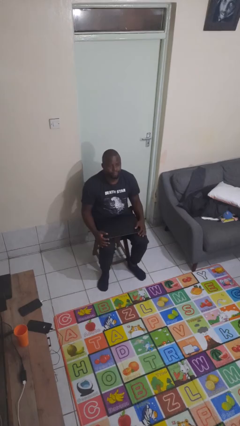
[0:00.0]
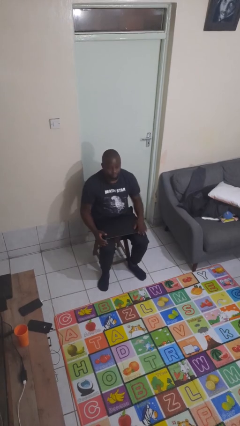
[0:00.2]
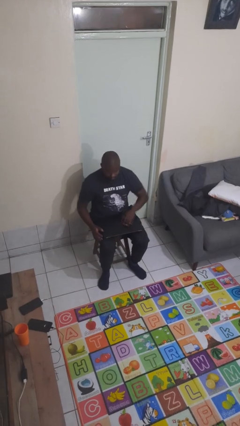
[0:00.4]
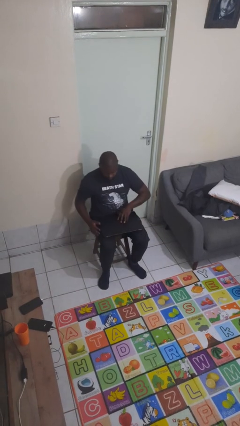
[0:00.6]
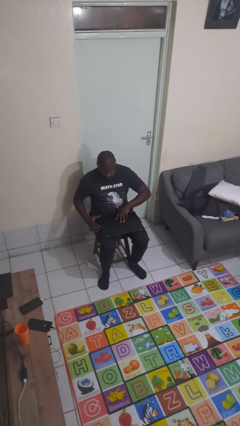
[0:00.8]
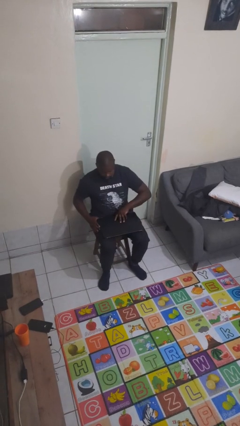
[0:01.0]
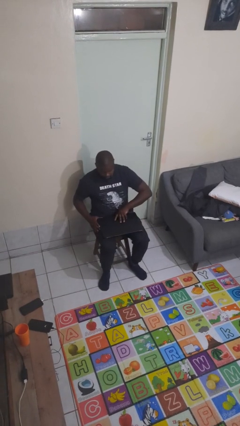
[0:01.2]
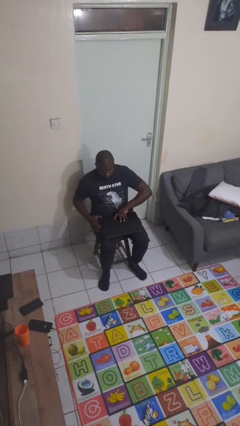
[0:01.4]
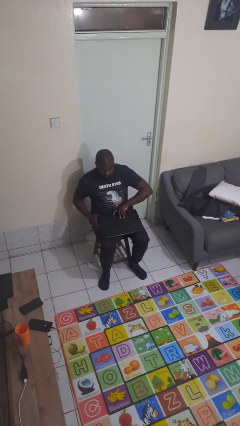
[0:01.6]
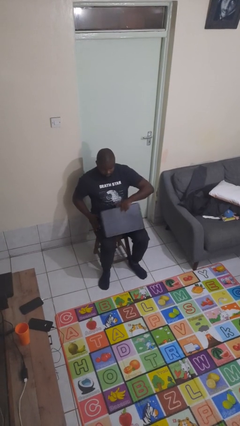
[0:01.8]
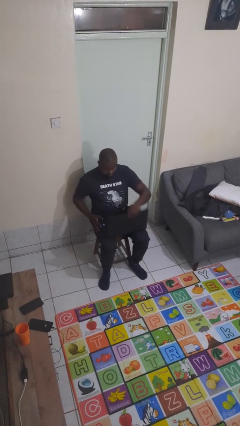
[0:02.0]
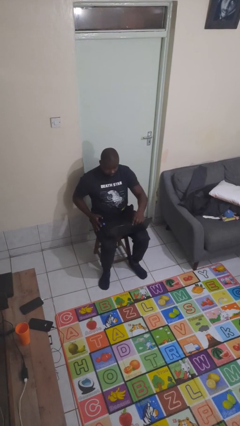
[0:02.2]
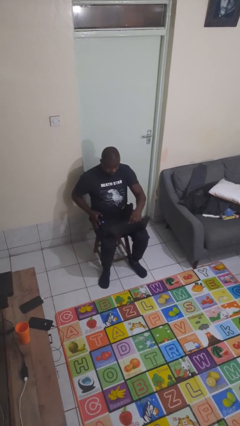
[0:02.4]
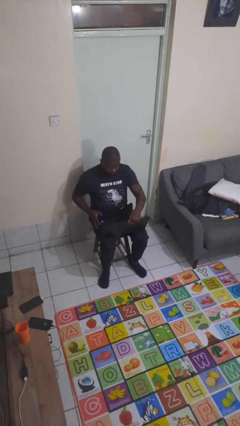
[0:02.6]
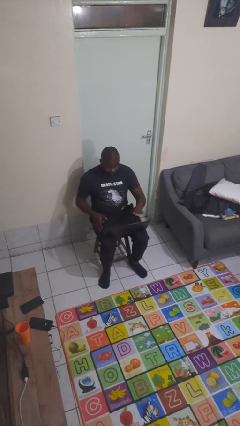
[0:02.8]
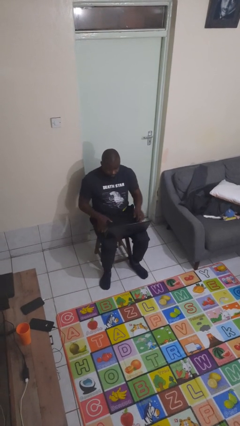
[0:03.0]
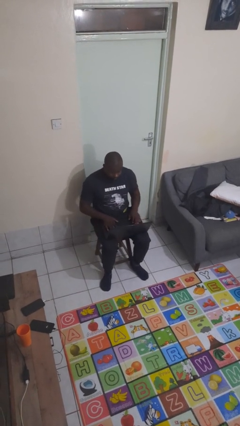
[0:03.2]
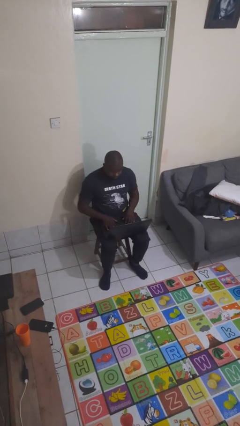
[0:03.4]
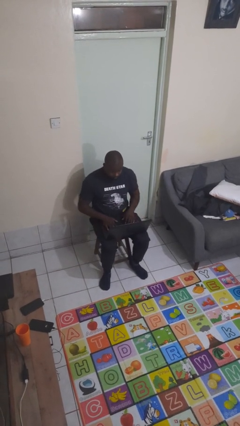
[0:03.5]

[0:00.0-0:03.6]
person opens laptop

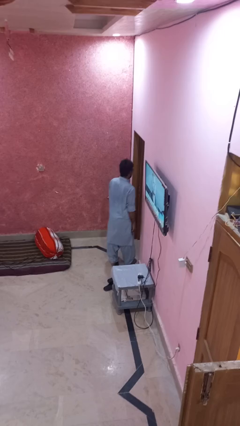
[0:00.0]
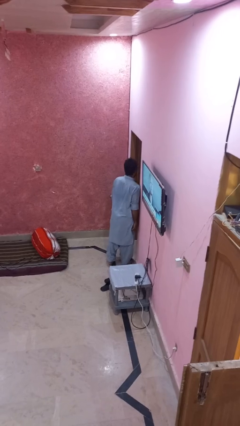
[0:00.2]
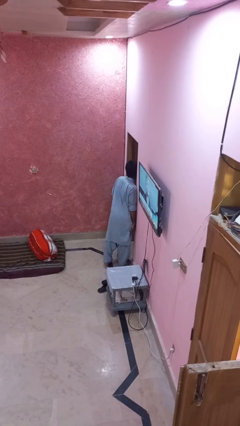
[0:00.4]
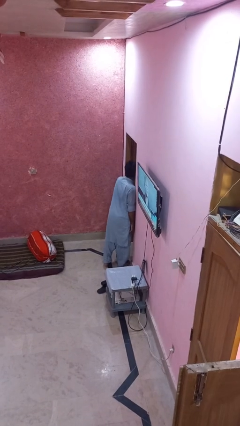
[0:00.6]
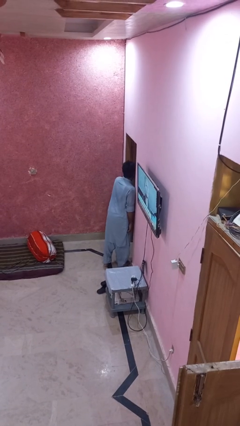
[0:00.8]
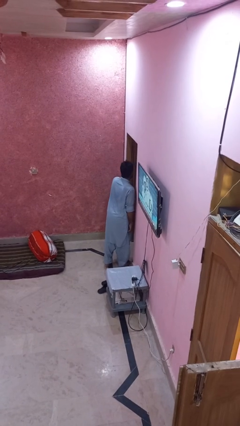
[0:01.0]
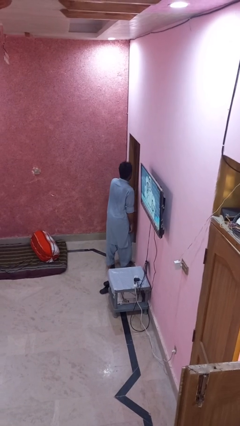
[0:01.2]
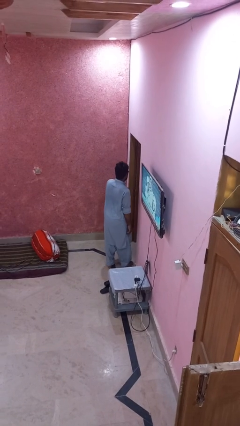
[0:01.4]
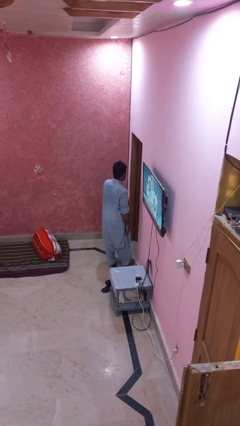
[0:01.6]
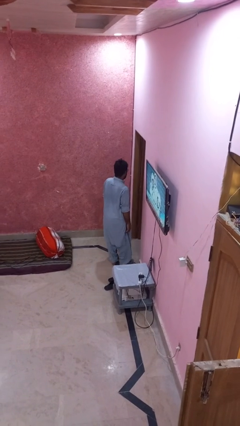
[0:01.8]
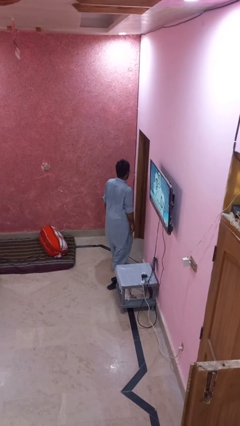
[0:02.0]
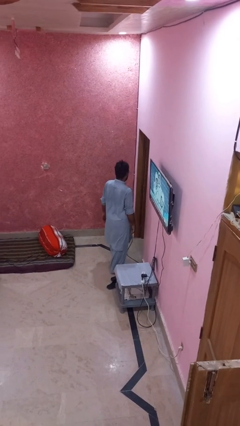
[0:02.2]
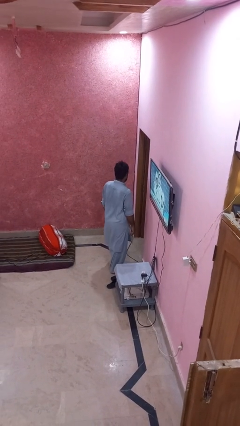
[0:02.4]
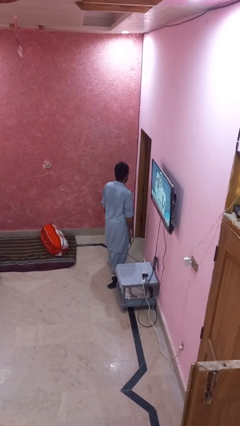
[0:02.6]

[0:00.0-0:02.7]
person bumps into wall

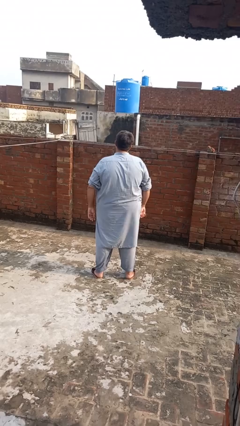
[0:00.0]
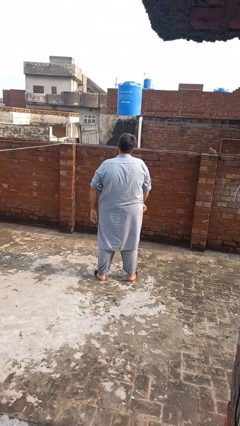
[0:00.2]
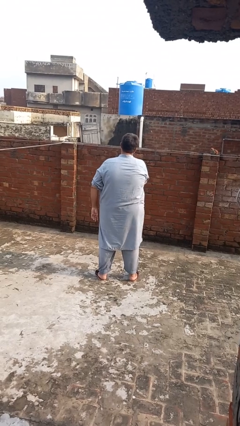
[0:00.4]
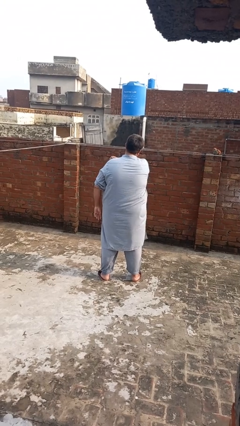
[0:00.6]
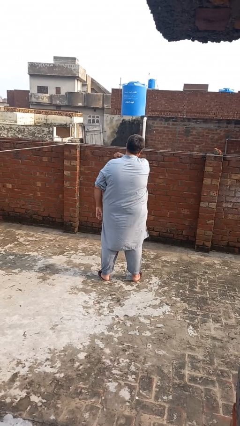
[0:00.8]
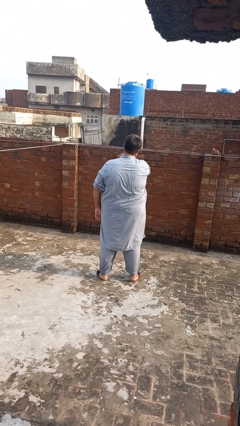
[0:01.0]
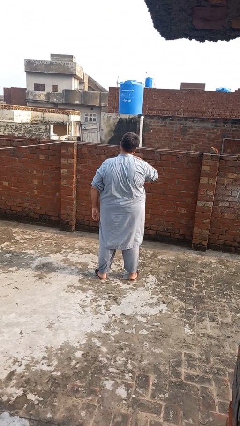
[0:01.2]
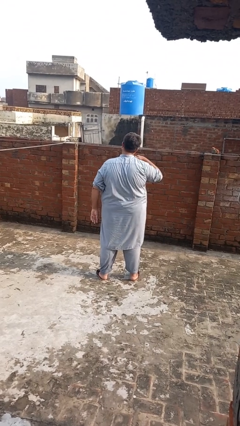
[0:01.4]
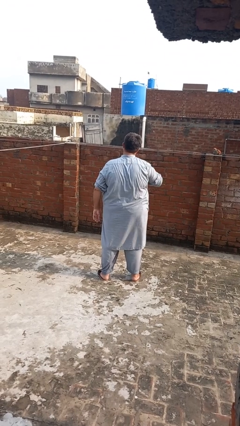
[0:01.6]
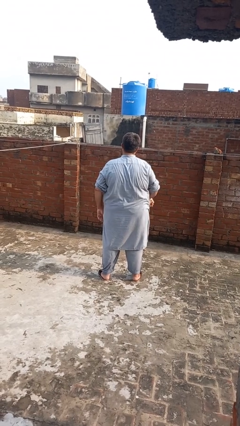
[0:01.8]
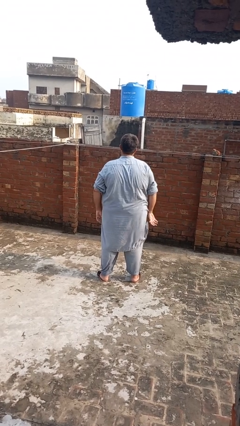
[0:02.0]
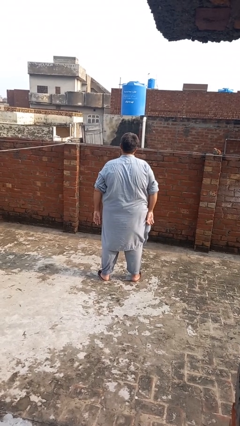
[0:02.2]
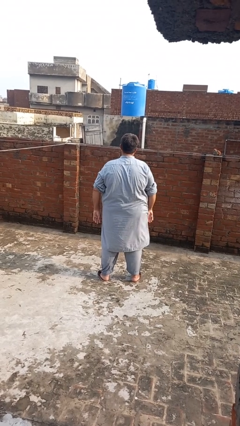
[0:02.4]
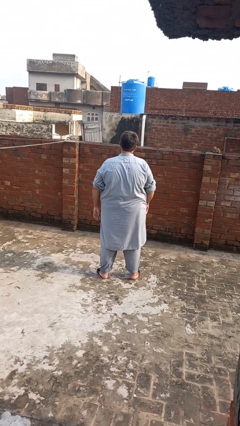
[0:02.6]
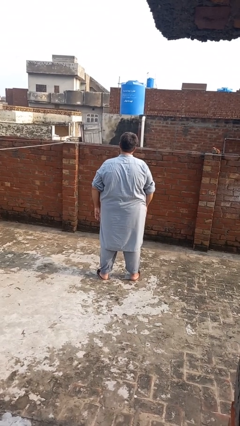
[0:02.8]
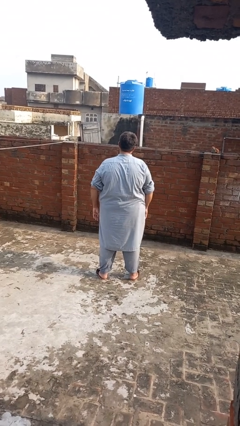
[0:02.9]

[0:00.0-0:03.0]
person gestures cut

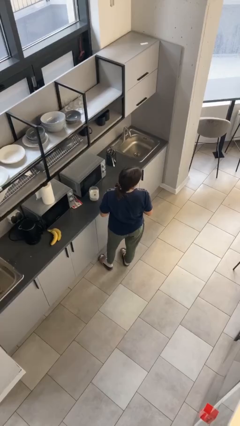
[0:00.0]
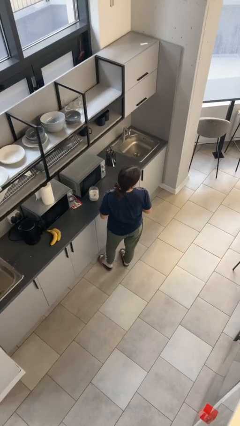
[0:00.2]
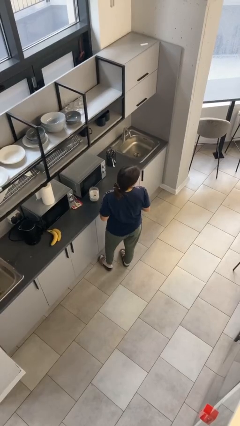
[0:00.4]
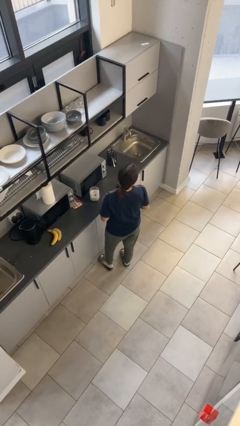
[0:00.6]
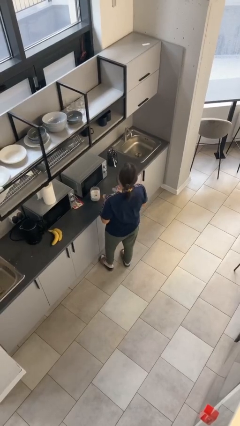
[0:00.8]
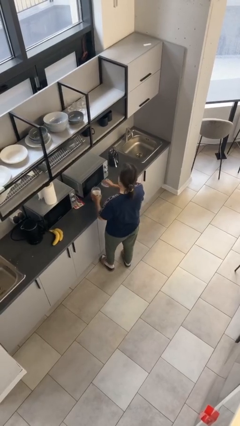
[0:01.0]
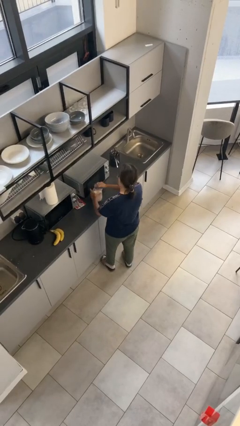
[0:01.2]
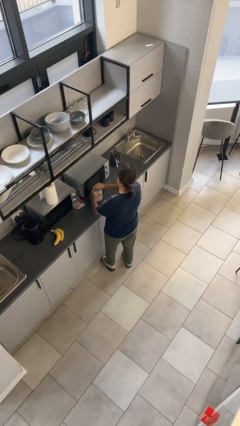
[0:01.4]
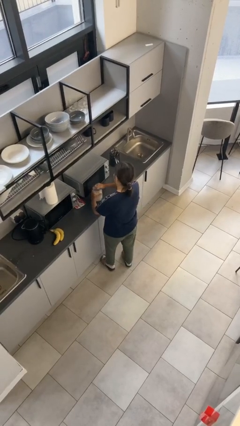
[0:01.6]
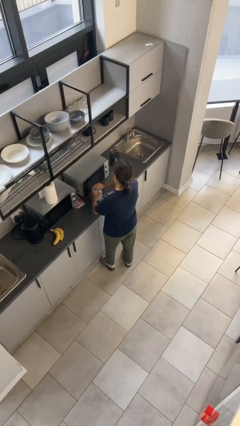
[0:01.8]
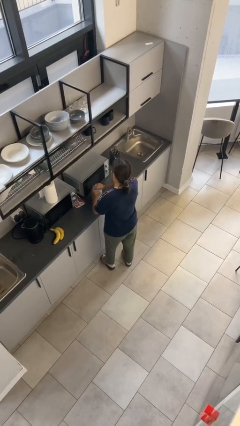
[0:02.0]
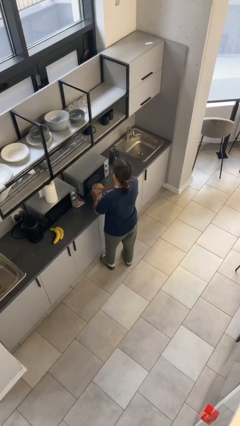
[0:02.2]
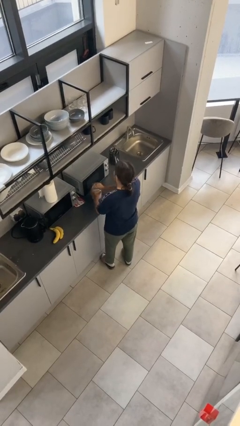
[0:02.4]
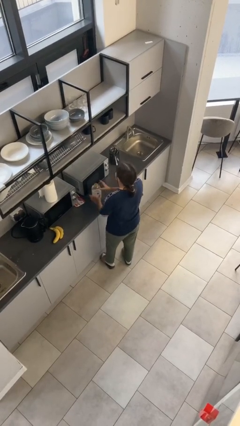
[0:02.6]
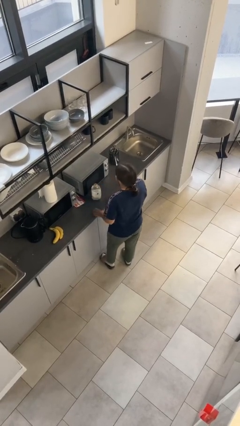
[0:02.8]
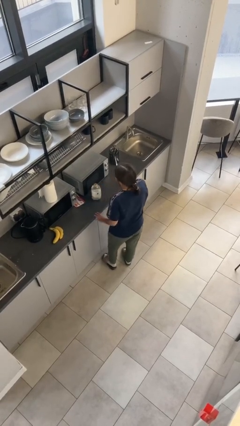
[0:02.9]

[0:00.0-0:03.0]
person closes jar

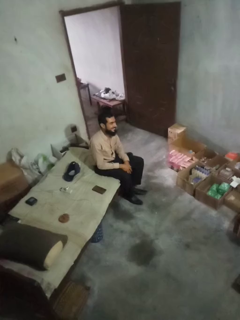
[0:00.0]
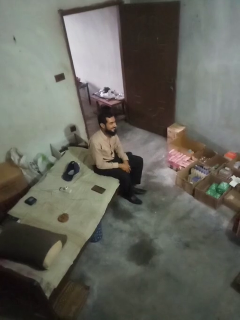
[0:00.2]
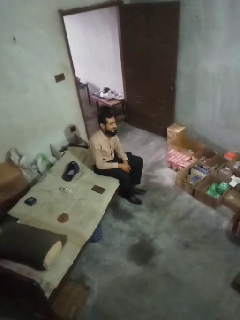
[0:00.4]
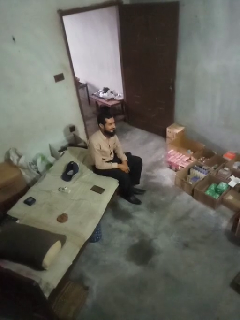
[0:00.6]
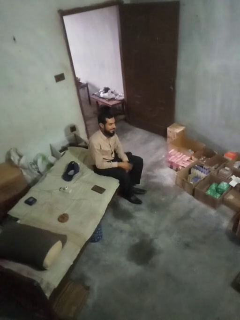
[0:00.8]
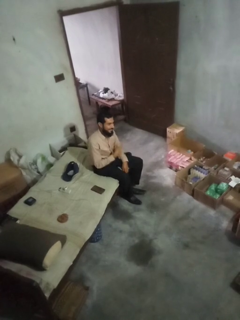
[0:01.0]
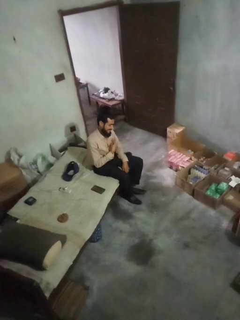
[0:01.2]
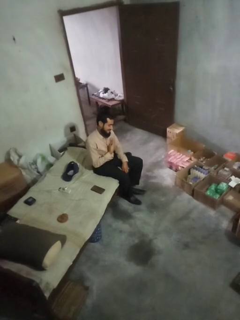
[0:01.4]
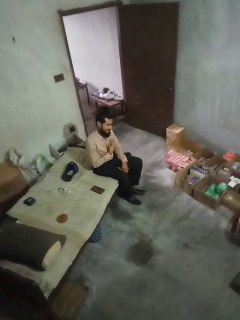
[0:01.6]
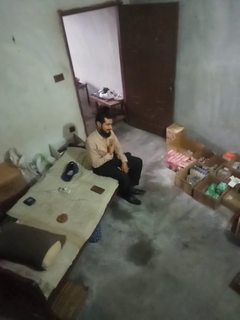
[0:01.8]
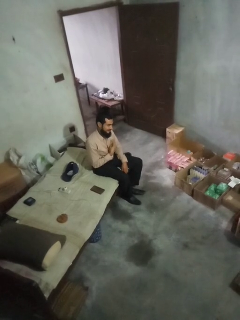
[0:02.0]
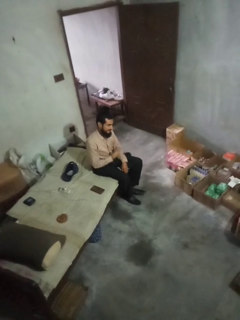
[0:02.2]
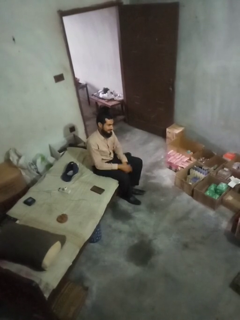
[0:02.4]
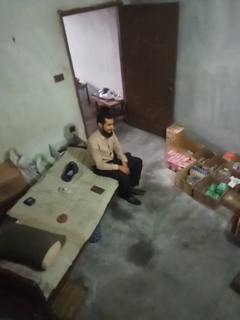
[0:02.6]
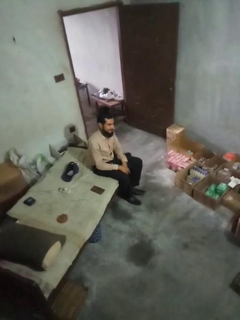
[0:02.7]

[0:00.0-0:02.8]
person gestures peace

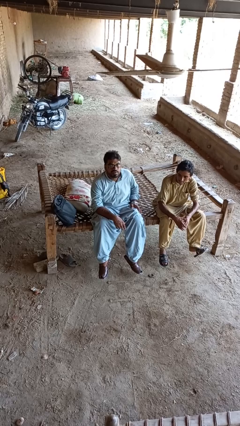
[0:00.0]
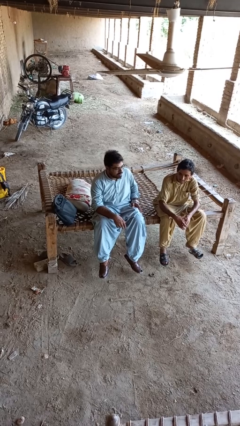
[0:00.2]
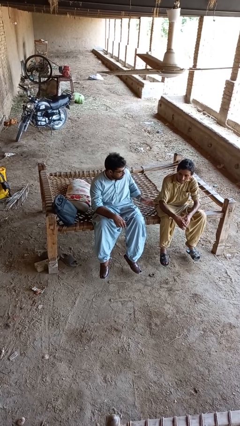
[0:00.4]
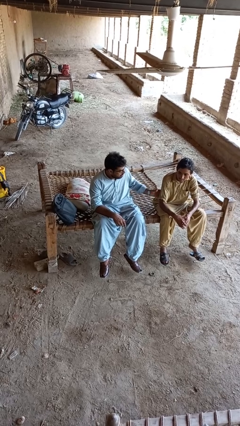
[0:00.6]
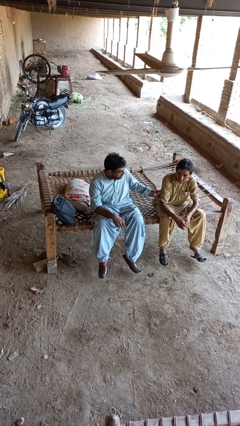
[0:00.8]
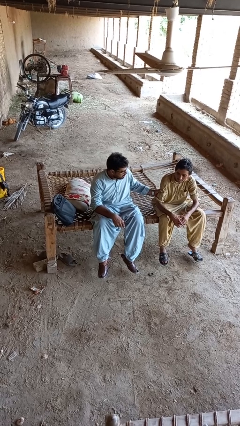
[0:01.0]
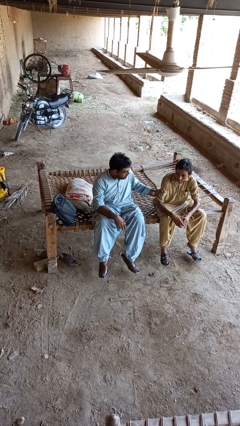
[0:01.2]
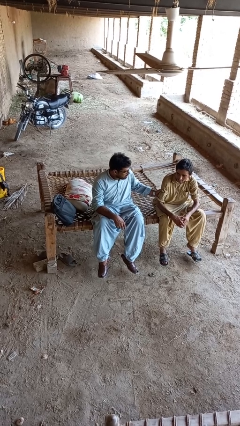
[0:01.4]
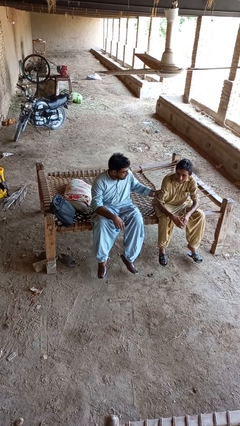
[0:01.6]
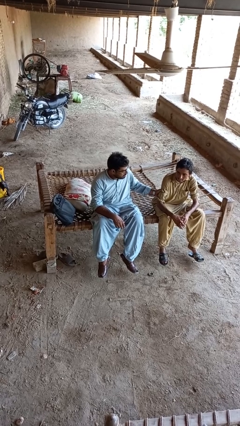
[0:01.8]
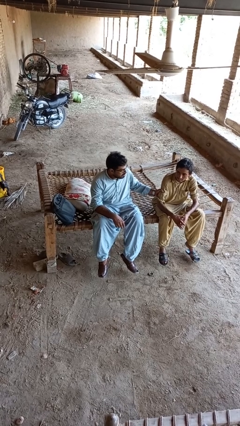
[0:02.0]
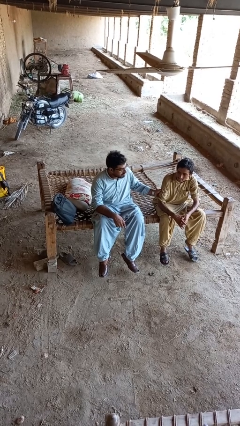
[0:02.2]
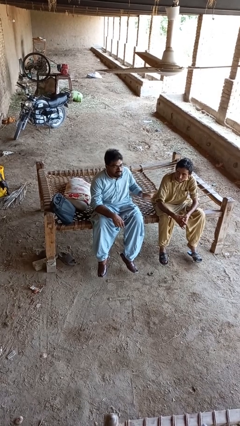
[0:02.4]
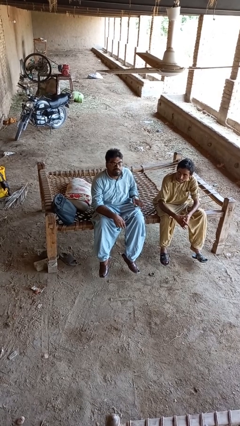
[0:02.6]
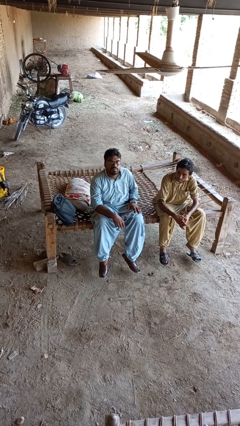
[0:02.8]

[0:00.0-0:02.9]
person grabs person by bicep
